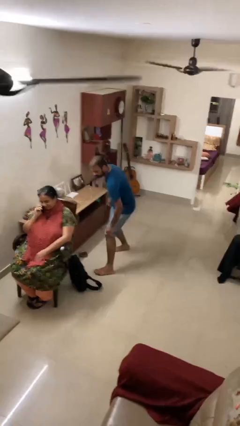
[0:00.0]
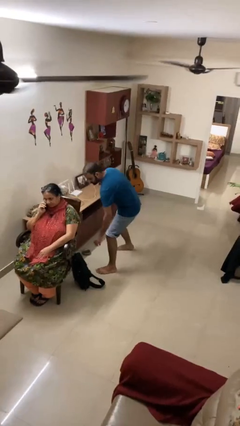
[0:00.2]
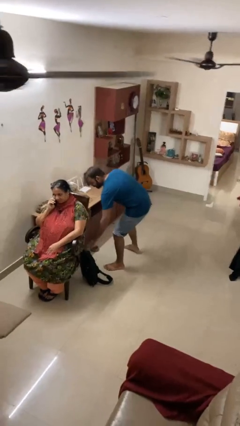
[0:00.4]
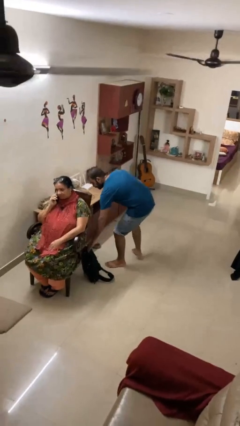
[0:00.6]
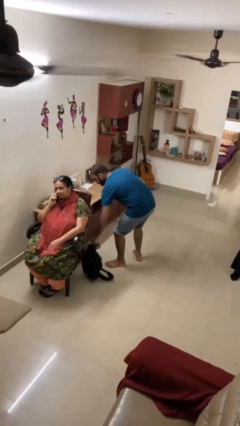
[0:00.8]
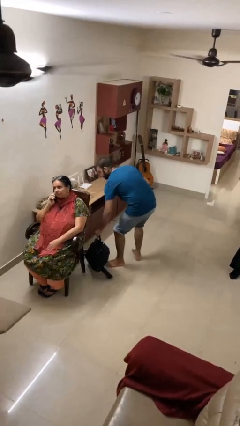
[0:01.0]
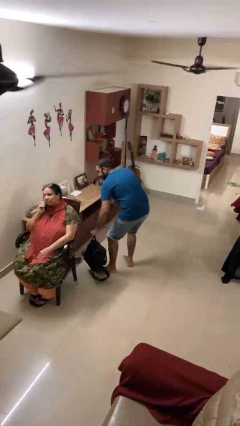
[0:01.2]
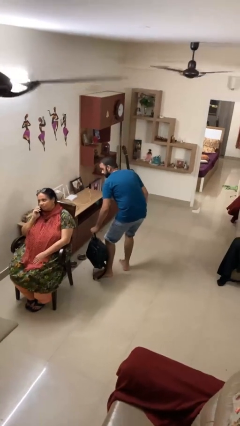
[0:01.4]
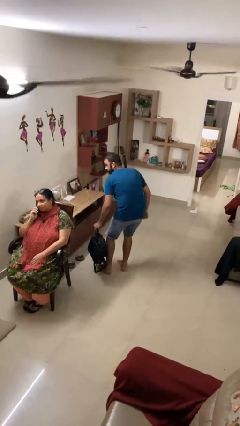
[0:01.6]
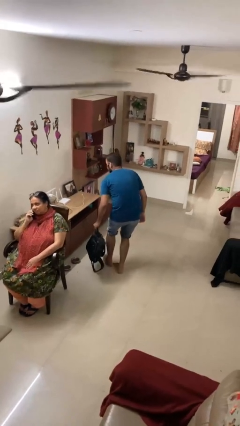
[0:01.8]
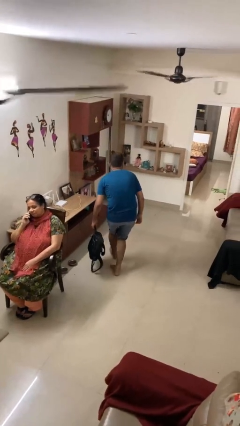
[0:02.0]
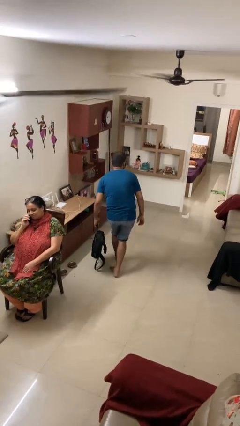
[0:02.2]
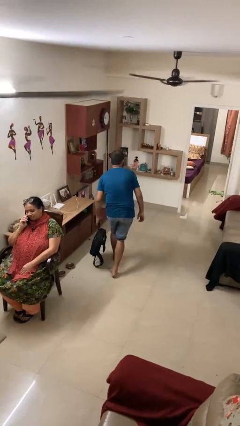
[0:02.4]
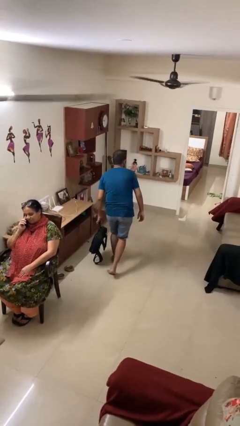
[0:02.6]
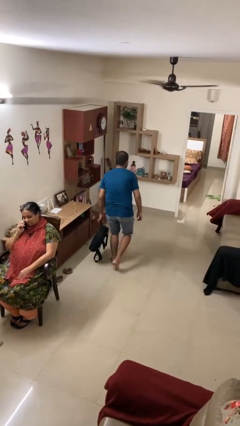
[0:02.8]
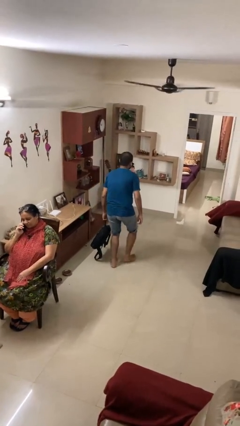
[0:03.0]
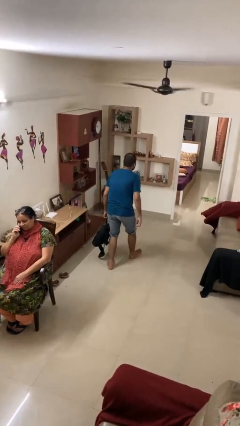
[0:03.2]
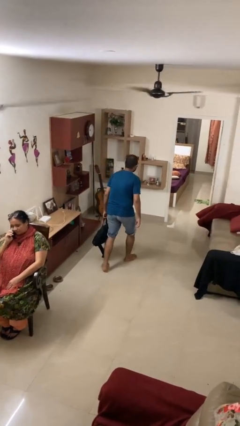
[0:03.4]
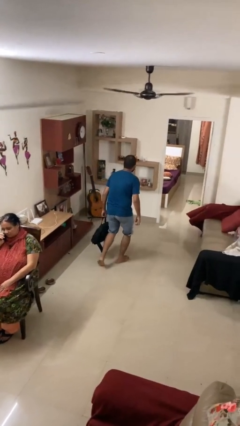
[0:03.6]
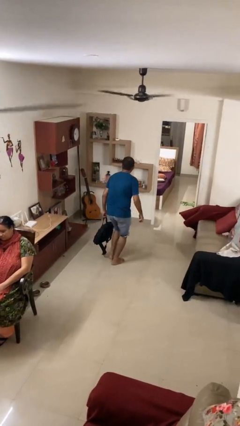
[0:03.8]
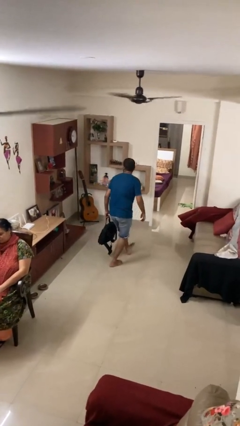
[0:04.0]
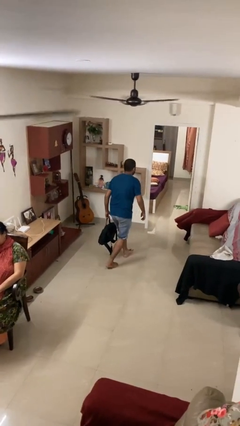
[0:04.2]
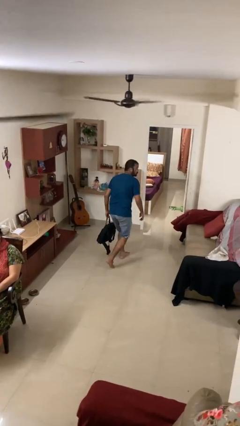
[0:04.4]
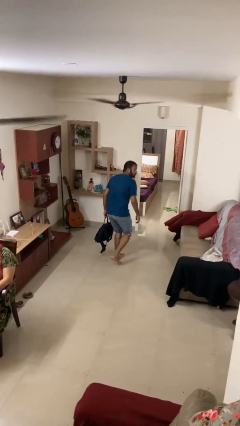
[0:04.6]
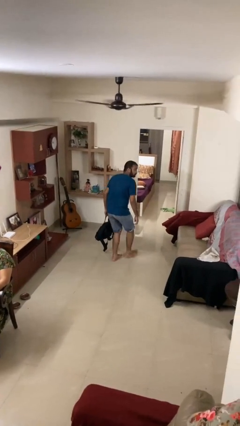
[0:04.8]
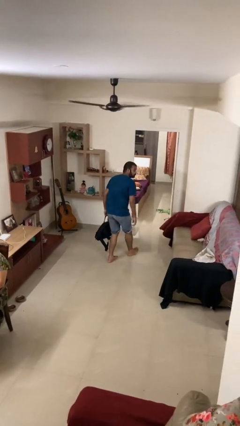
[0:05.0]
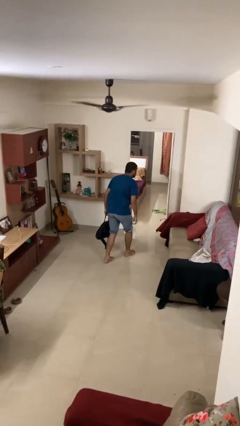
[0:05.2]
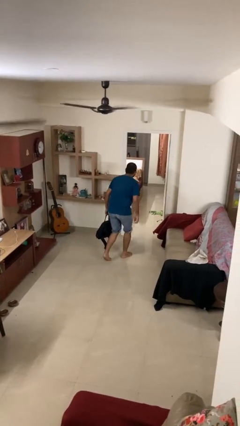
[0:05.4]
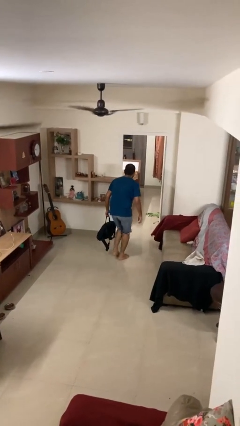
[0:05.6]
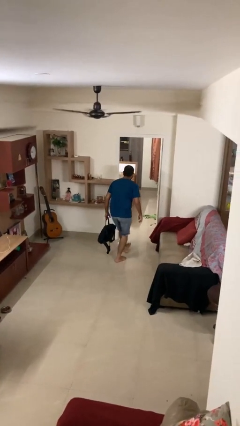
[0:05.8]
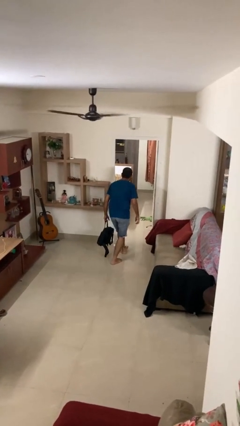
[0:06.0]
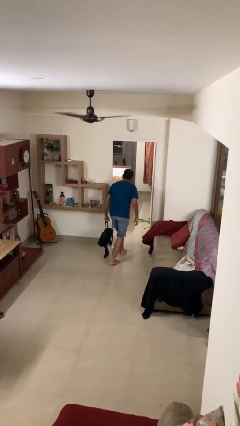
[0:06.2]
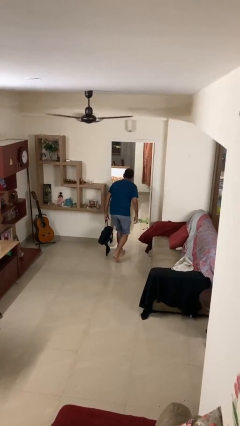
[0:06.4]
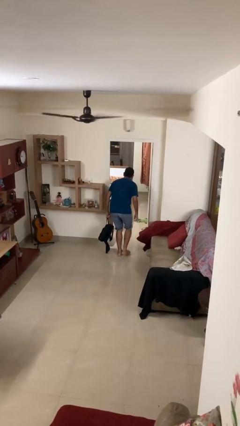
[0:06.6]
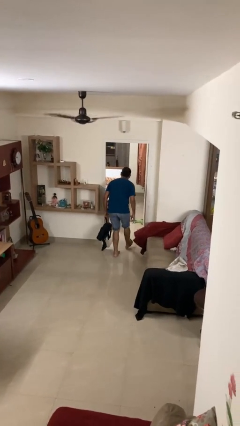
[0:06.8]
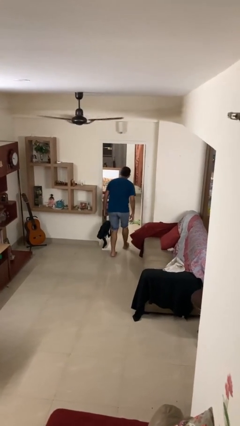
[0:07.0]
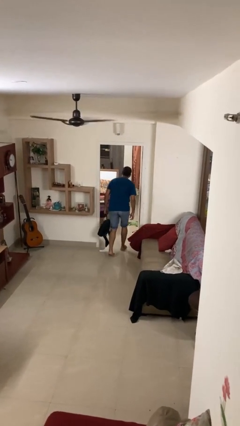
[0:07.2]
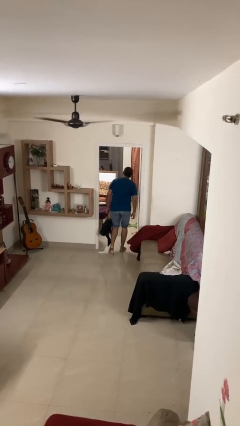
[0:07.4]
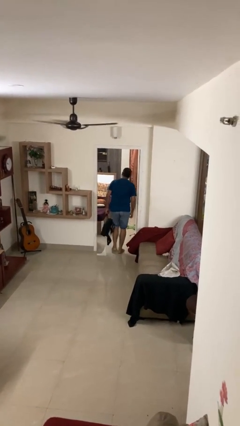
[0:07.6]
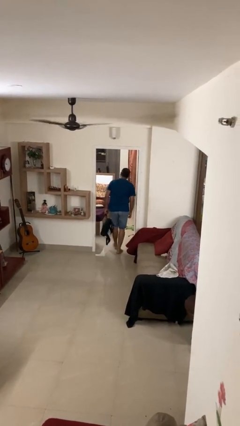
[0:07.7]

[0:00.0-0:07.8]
person steals object from person

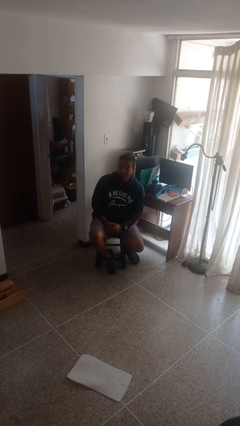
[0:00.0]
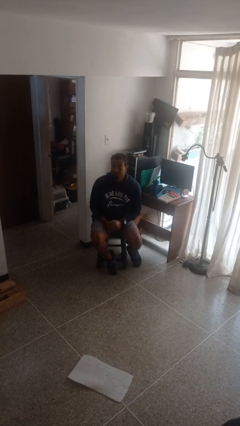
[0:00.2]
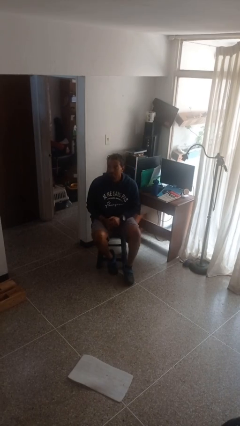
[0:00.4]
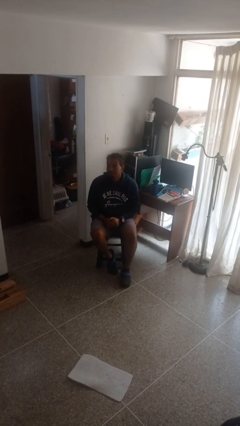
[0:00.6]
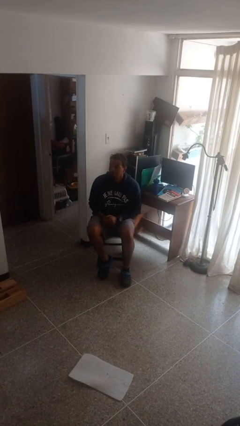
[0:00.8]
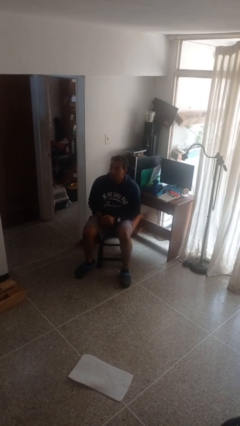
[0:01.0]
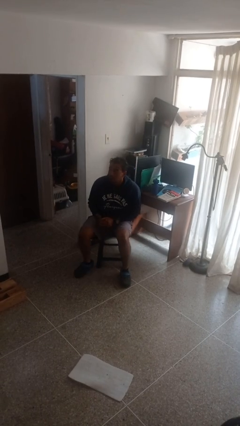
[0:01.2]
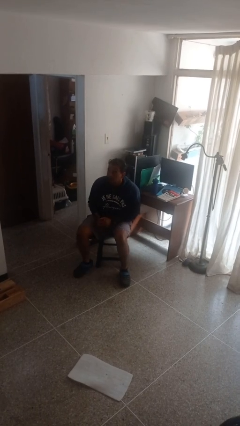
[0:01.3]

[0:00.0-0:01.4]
person gestures lower hand

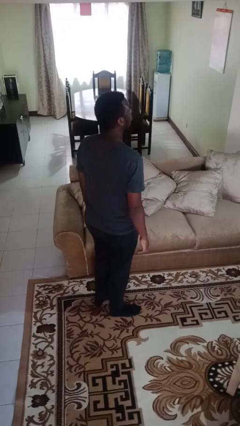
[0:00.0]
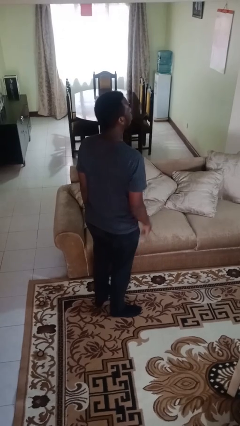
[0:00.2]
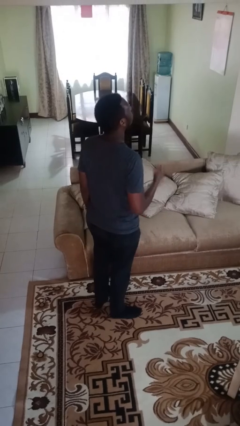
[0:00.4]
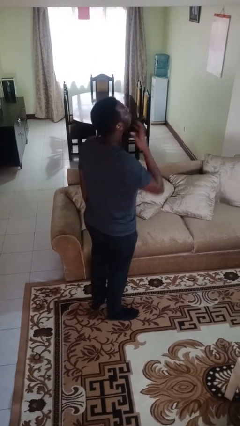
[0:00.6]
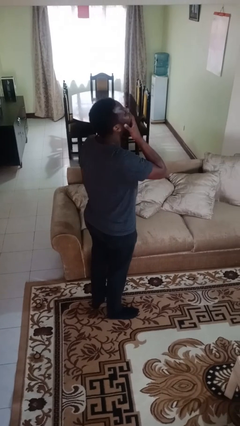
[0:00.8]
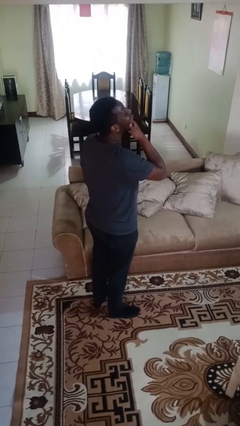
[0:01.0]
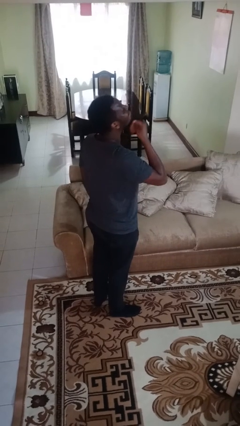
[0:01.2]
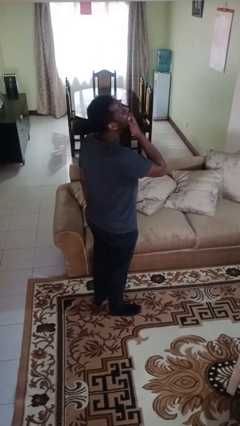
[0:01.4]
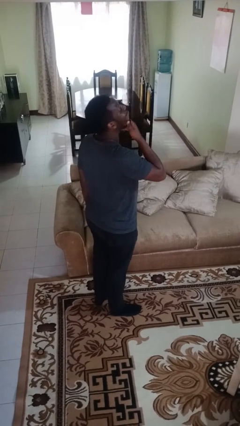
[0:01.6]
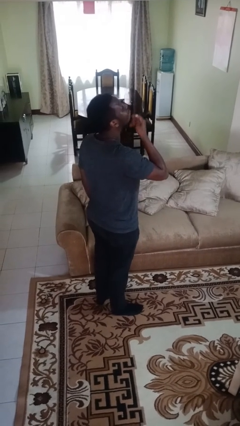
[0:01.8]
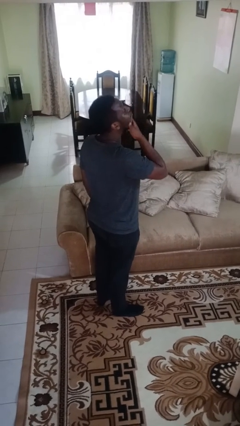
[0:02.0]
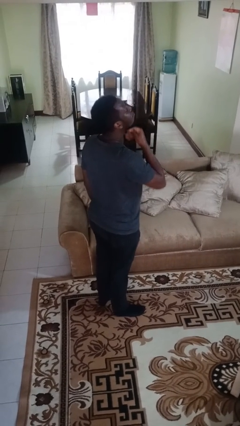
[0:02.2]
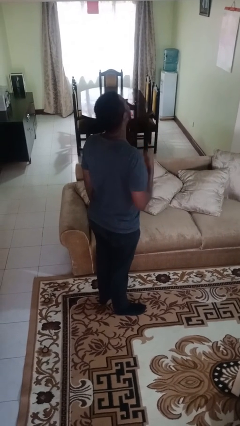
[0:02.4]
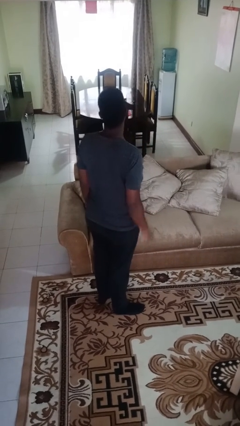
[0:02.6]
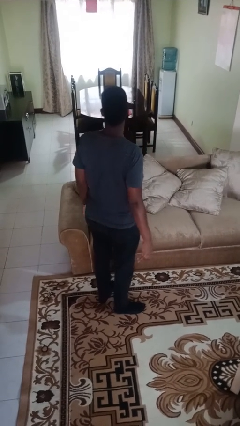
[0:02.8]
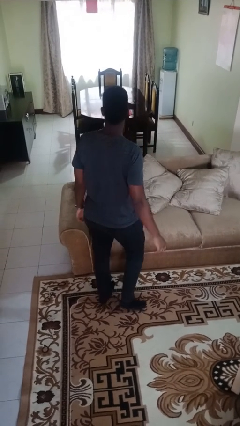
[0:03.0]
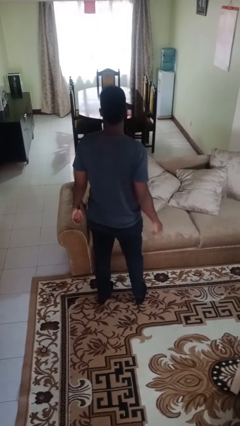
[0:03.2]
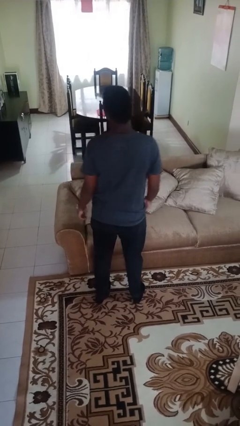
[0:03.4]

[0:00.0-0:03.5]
person strokes chin

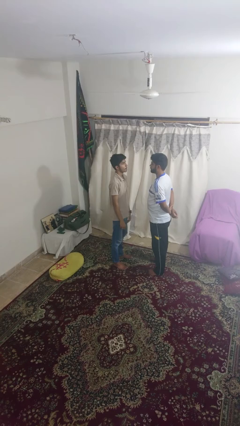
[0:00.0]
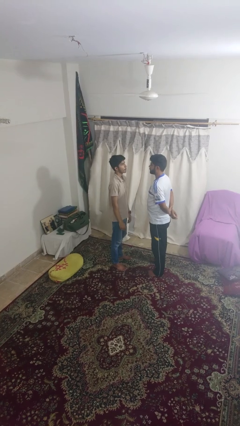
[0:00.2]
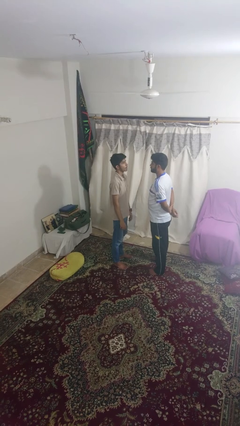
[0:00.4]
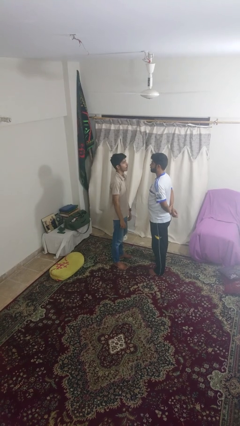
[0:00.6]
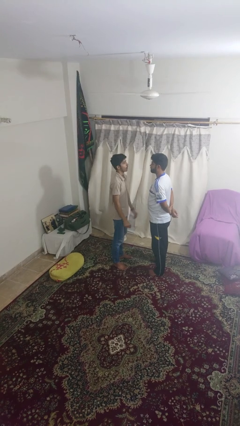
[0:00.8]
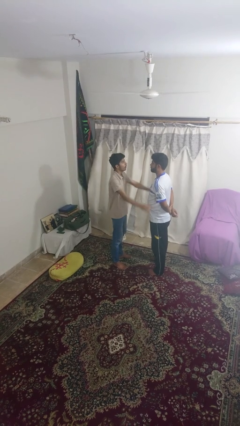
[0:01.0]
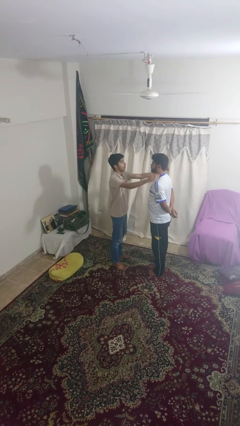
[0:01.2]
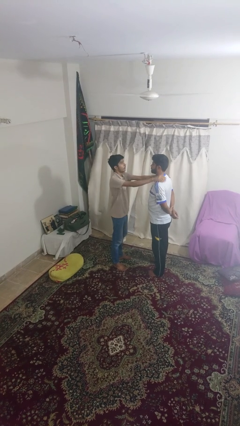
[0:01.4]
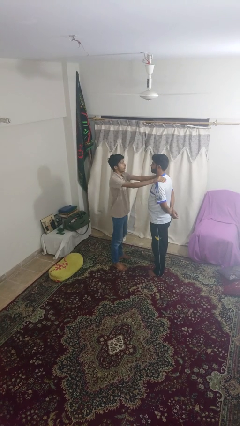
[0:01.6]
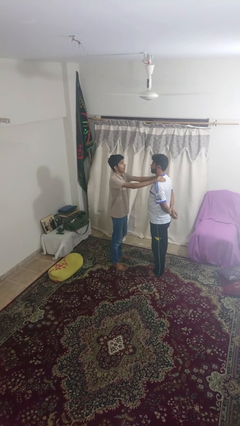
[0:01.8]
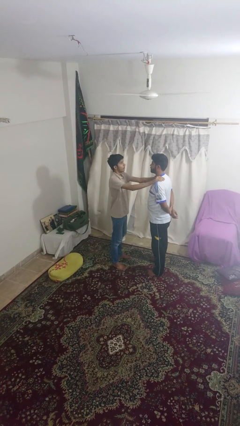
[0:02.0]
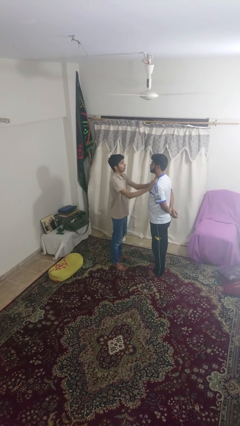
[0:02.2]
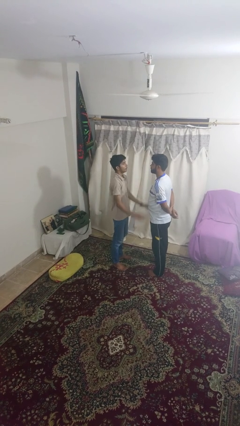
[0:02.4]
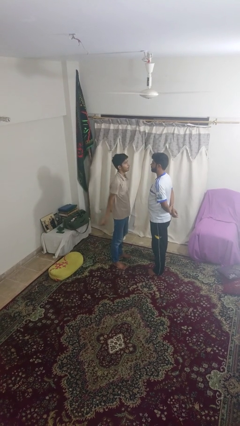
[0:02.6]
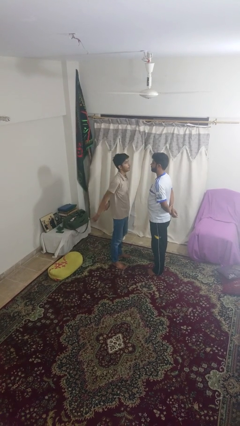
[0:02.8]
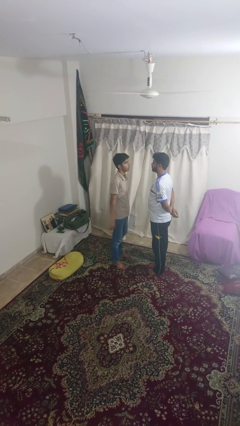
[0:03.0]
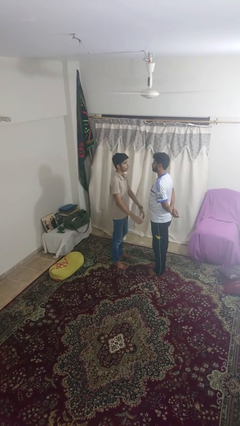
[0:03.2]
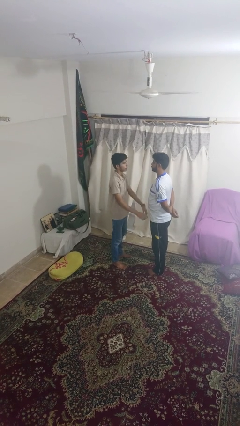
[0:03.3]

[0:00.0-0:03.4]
person pounds shoulders of person

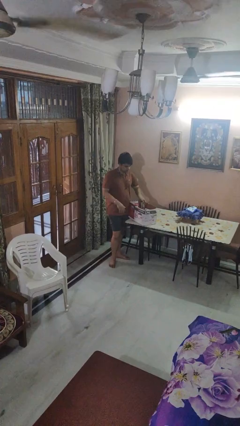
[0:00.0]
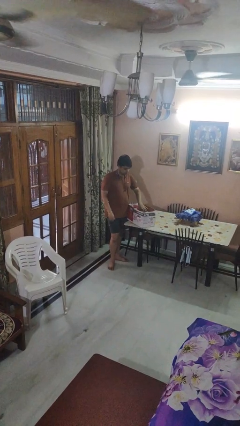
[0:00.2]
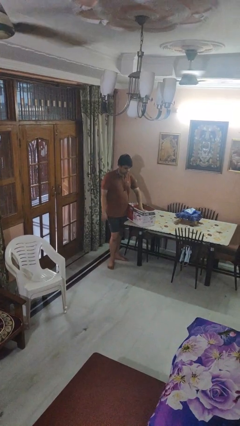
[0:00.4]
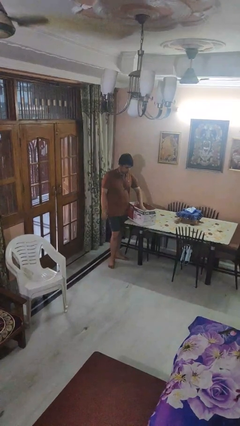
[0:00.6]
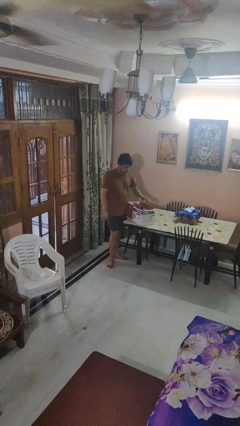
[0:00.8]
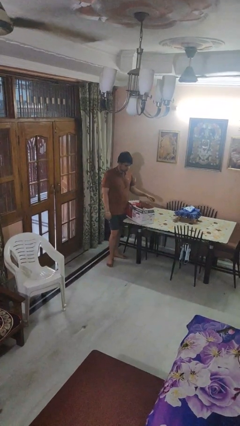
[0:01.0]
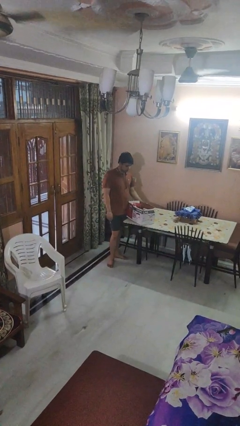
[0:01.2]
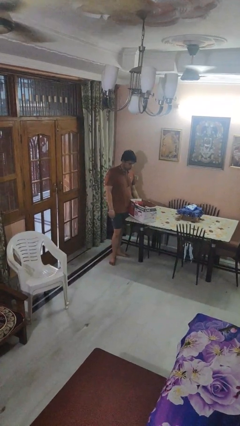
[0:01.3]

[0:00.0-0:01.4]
person puts object into box

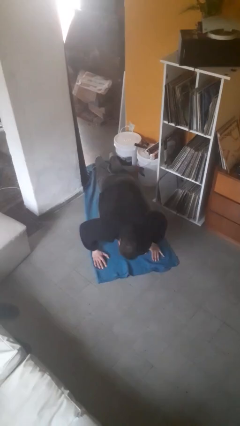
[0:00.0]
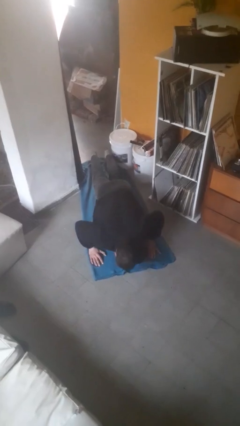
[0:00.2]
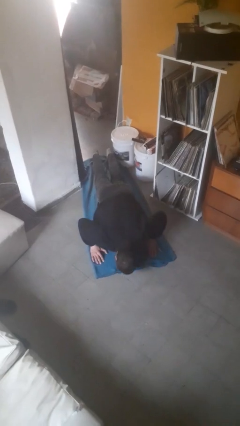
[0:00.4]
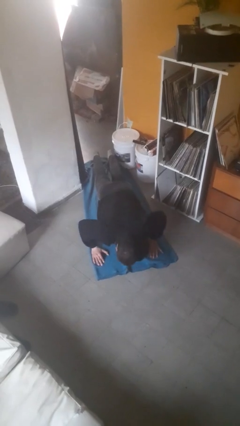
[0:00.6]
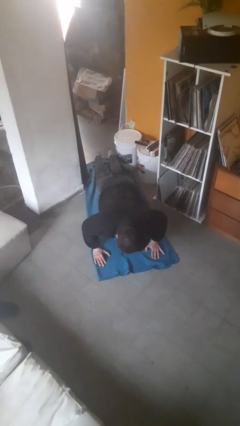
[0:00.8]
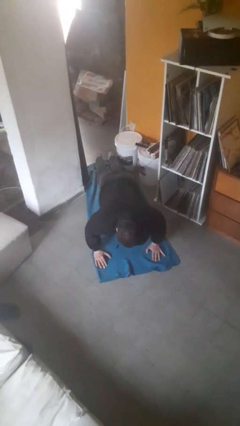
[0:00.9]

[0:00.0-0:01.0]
person exercises with pushup
